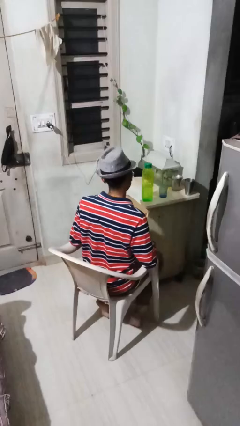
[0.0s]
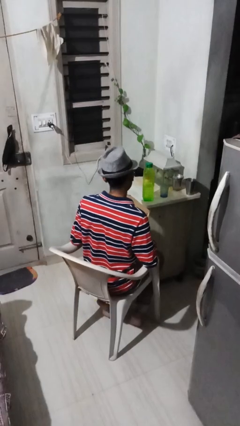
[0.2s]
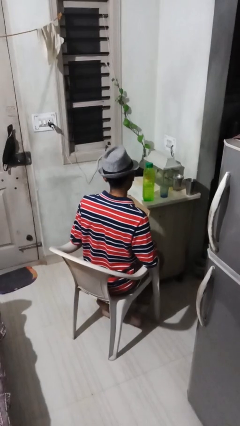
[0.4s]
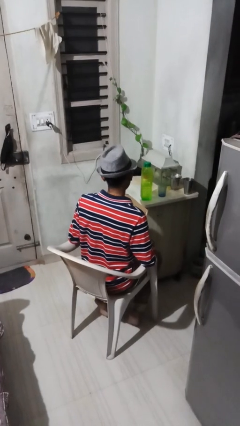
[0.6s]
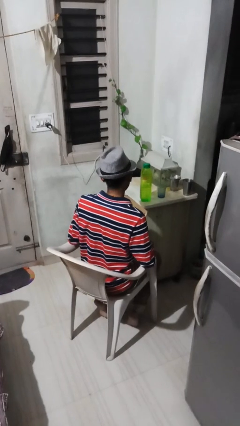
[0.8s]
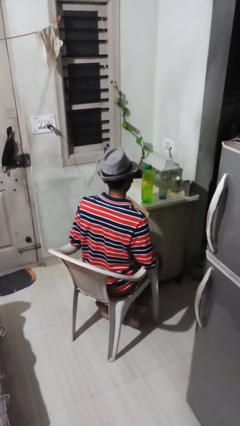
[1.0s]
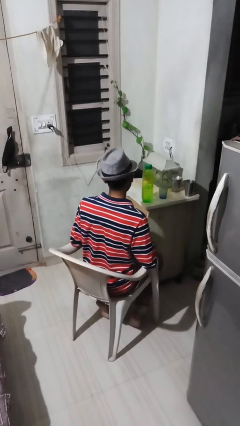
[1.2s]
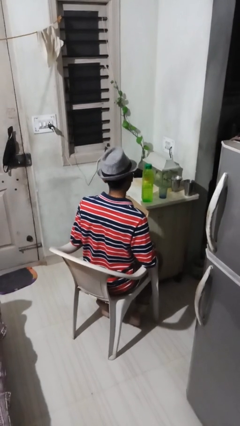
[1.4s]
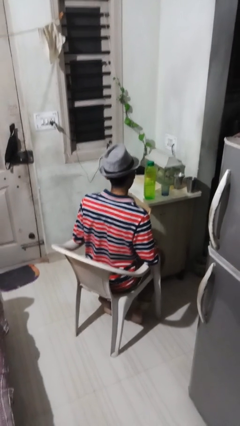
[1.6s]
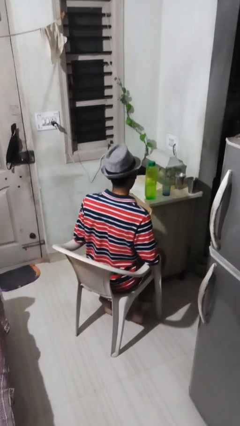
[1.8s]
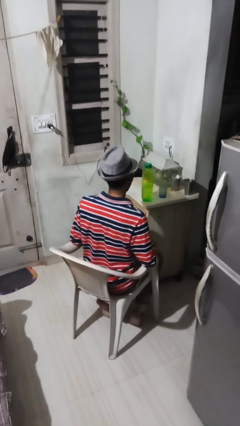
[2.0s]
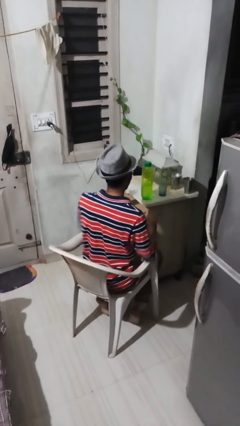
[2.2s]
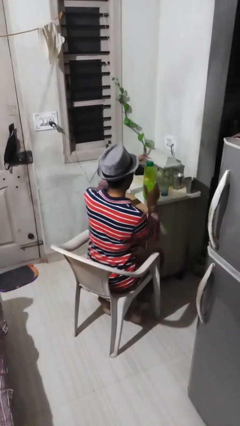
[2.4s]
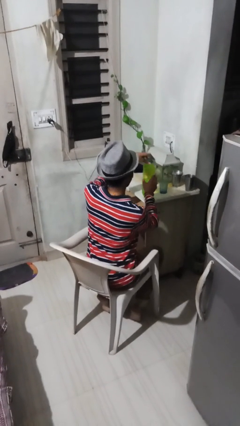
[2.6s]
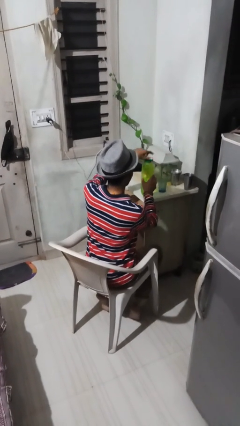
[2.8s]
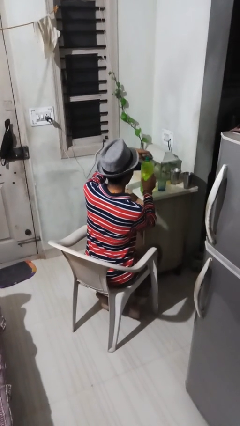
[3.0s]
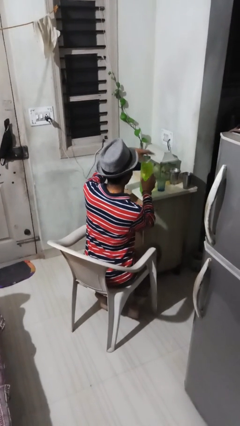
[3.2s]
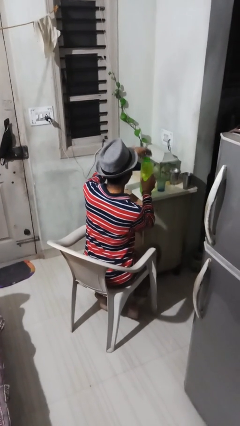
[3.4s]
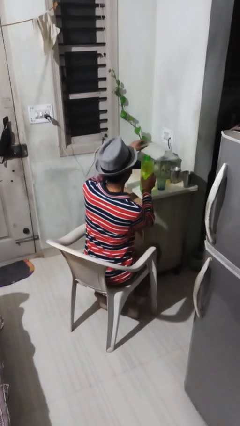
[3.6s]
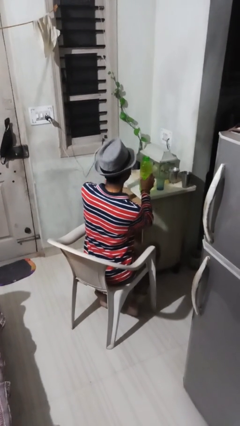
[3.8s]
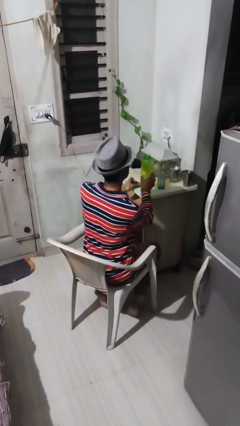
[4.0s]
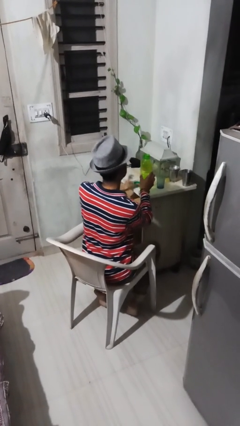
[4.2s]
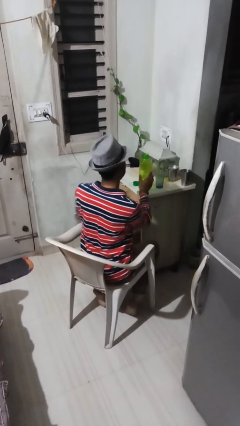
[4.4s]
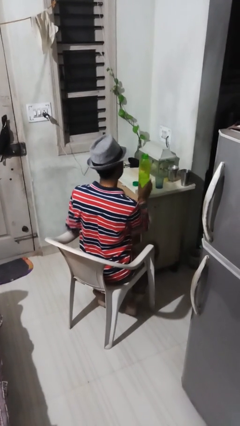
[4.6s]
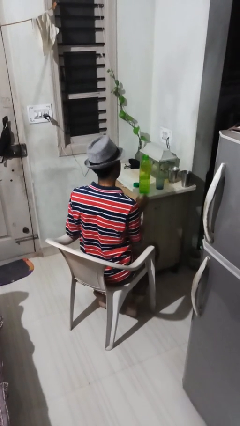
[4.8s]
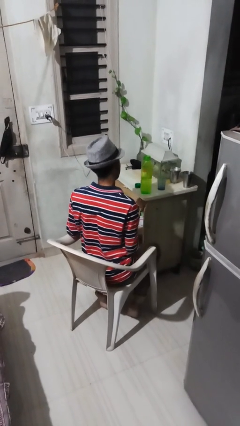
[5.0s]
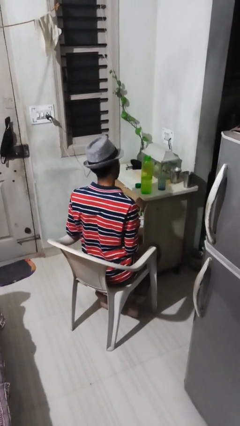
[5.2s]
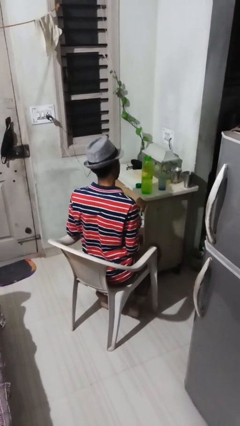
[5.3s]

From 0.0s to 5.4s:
person unscrews lid from bottle

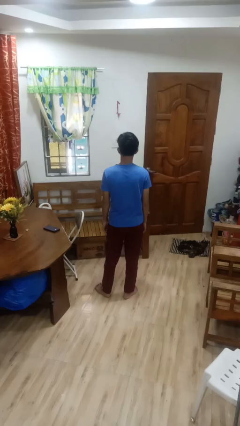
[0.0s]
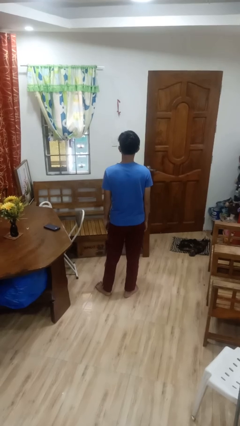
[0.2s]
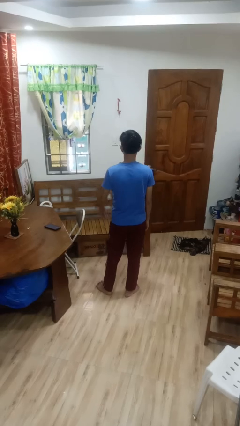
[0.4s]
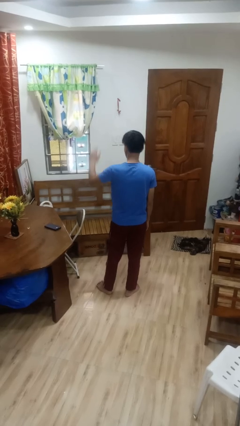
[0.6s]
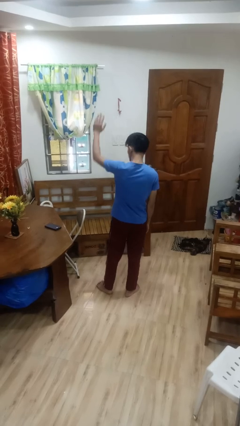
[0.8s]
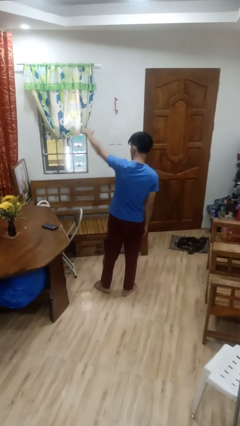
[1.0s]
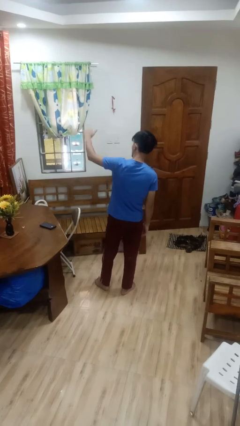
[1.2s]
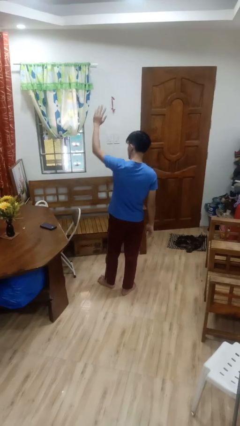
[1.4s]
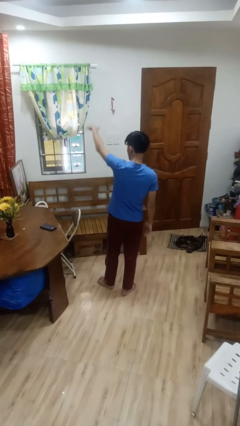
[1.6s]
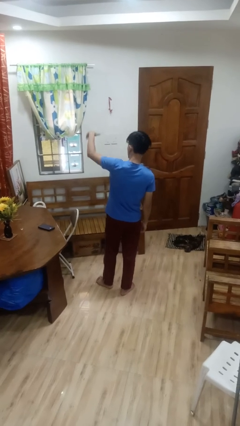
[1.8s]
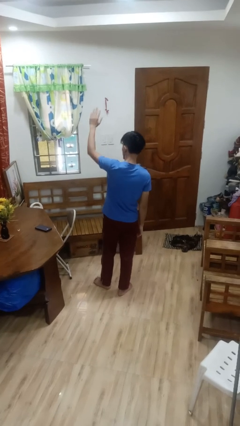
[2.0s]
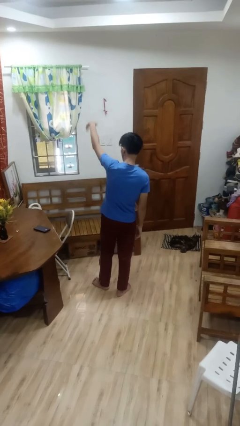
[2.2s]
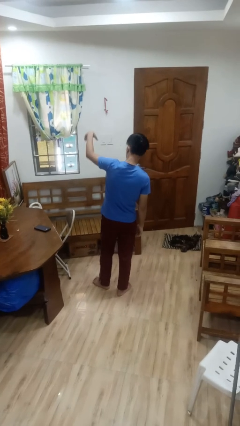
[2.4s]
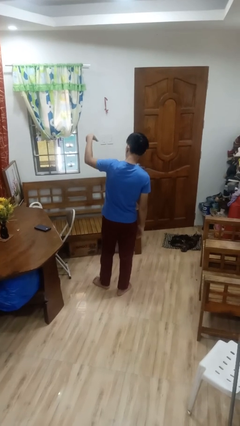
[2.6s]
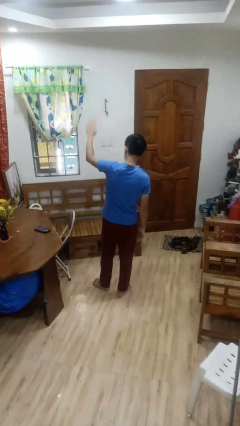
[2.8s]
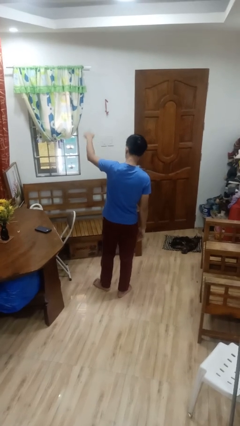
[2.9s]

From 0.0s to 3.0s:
person gestures come here

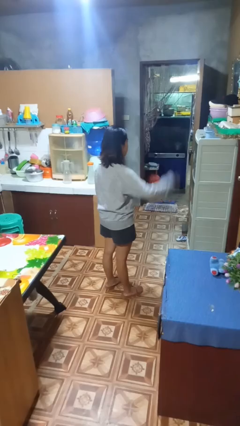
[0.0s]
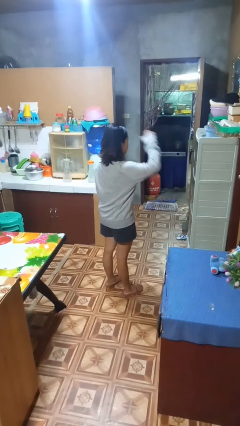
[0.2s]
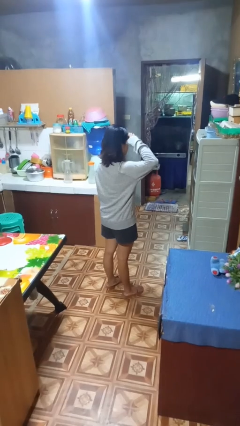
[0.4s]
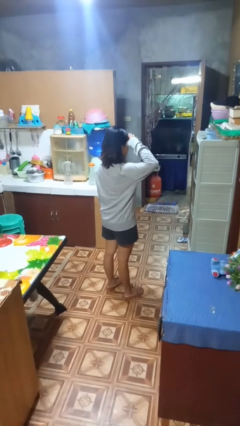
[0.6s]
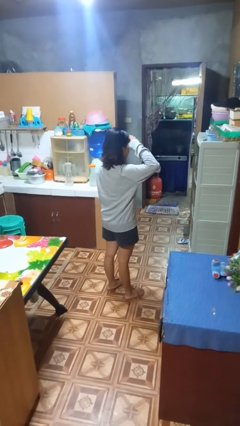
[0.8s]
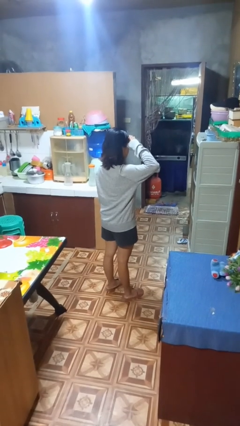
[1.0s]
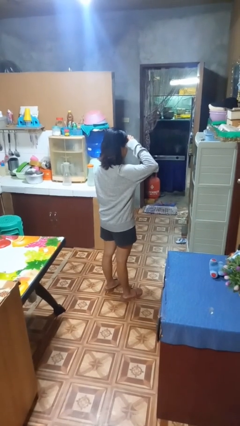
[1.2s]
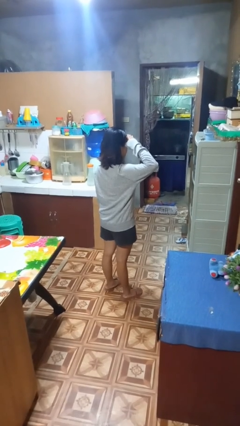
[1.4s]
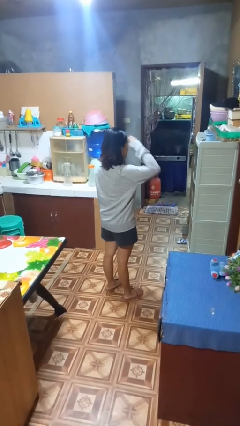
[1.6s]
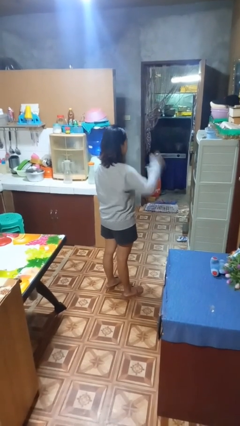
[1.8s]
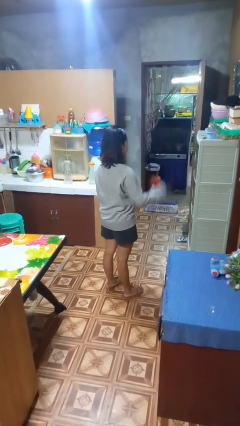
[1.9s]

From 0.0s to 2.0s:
person salutes

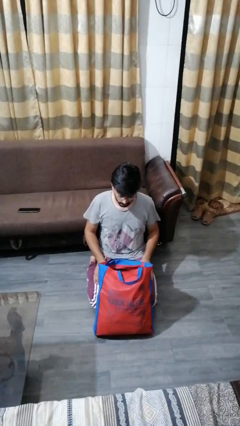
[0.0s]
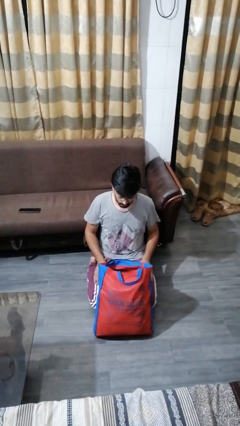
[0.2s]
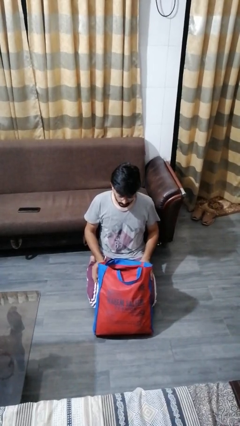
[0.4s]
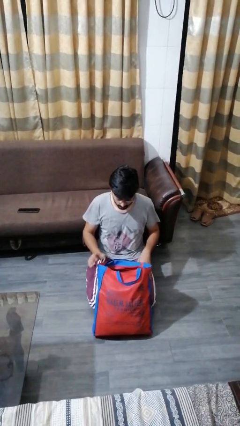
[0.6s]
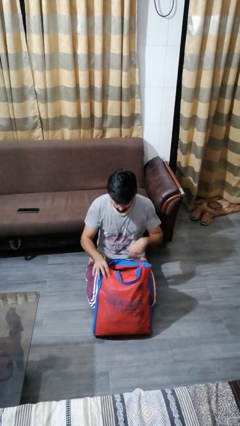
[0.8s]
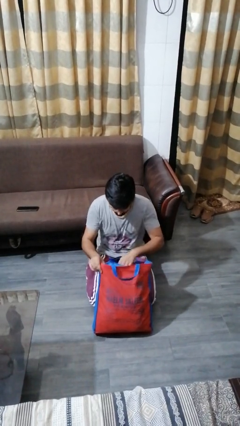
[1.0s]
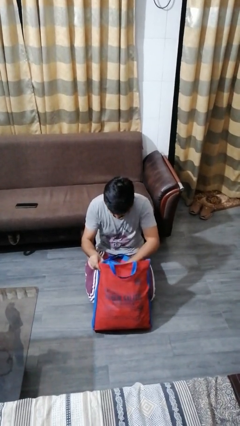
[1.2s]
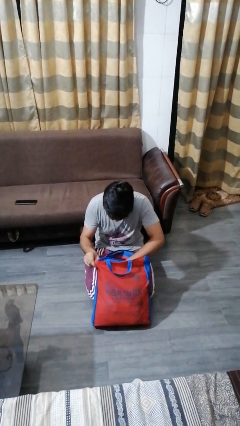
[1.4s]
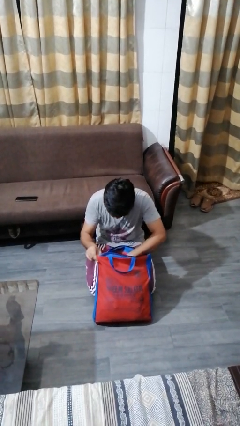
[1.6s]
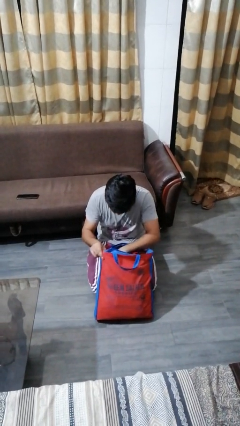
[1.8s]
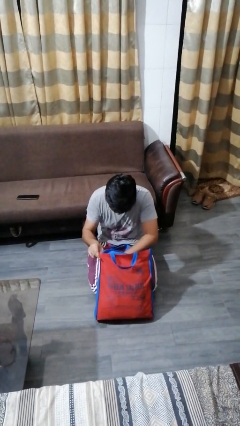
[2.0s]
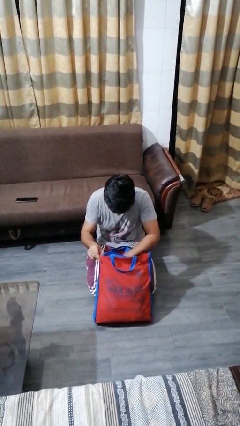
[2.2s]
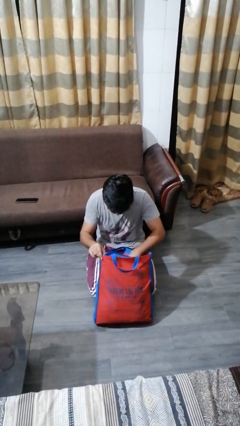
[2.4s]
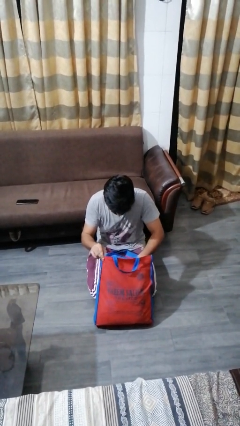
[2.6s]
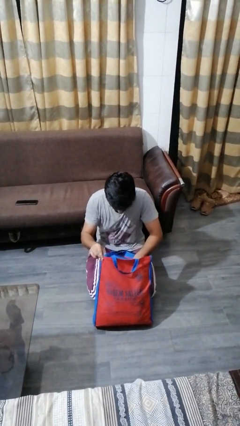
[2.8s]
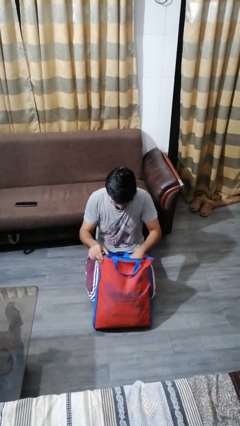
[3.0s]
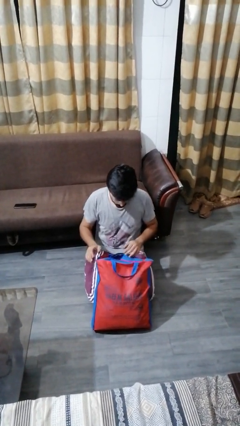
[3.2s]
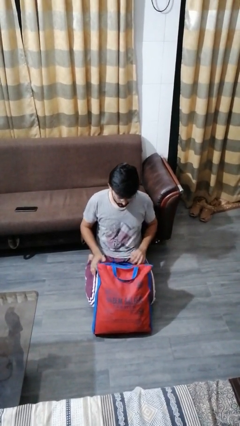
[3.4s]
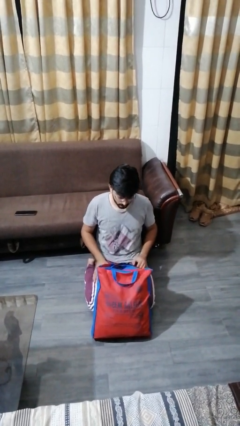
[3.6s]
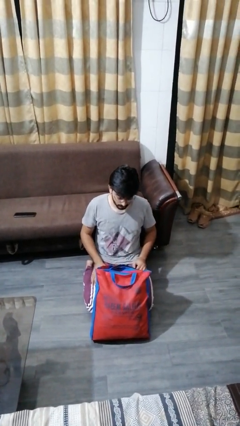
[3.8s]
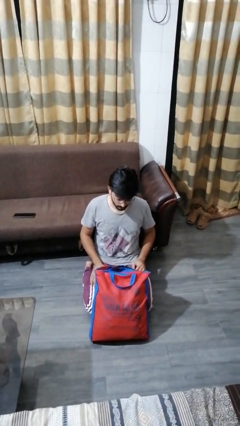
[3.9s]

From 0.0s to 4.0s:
person searches in bag

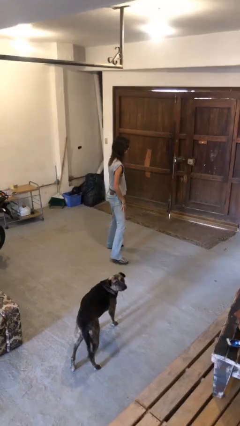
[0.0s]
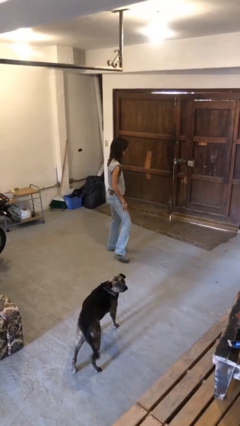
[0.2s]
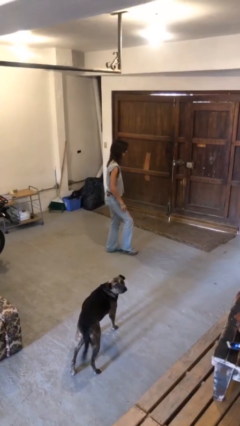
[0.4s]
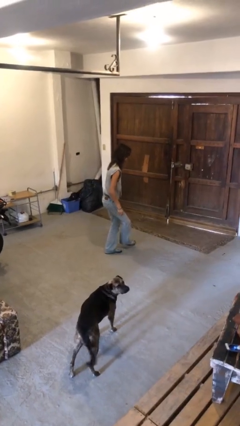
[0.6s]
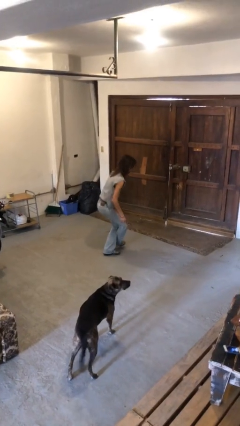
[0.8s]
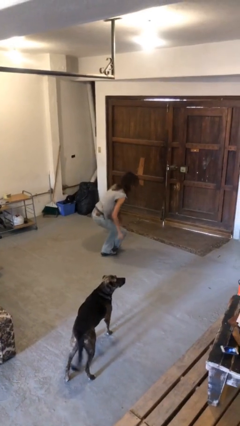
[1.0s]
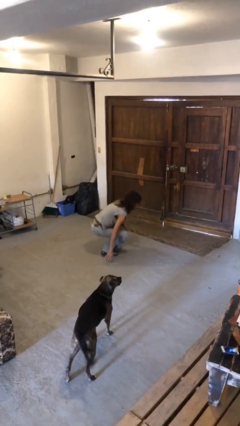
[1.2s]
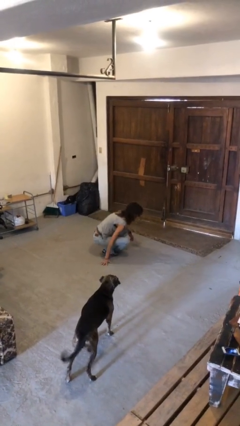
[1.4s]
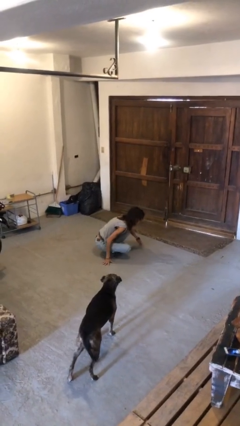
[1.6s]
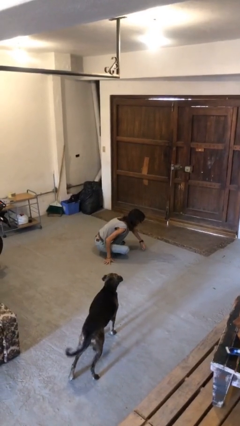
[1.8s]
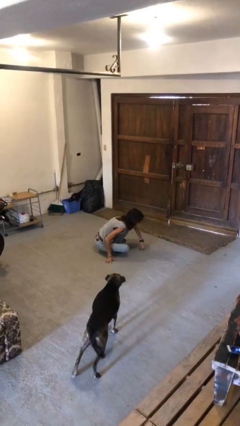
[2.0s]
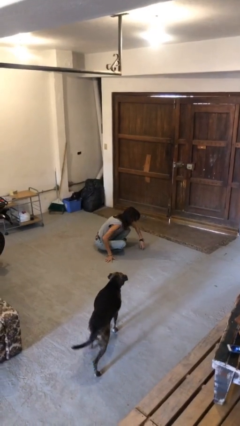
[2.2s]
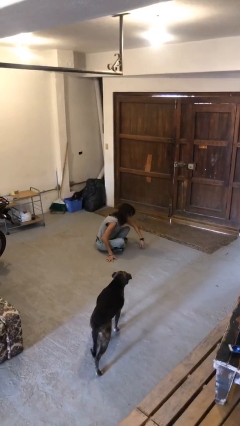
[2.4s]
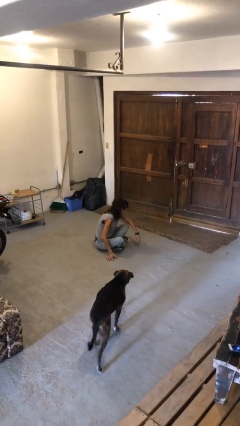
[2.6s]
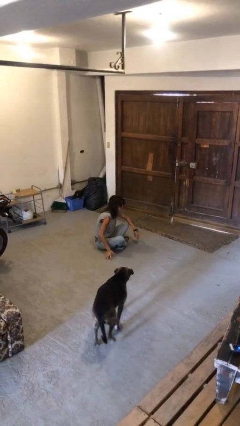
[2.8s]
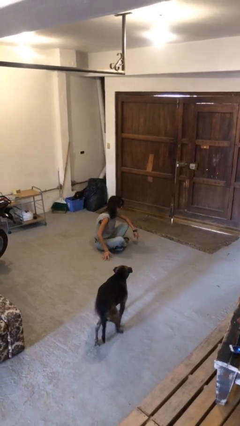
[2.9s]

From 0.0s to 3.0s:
person sits crisscross
